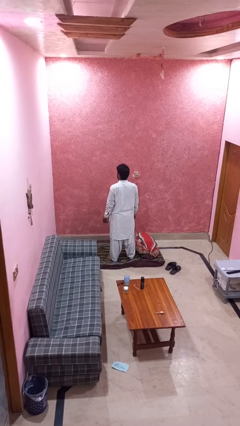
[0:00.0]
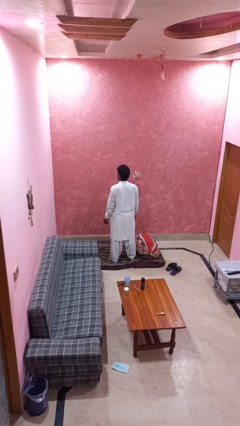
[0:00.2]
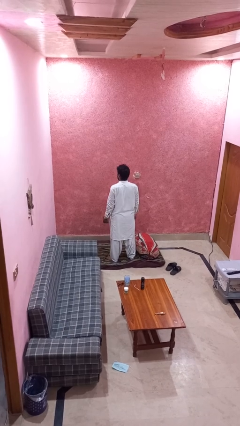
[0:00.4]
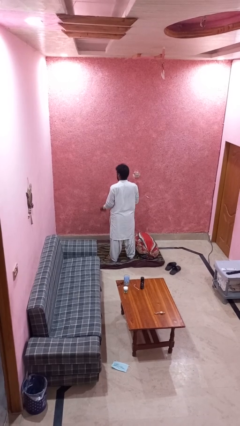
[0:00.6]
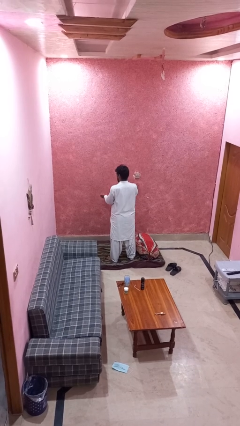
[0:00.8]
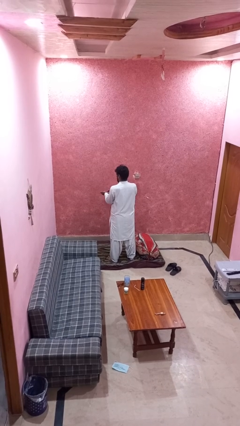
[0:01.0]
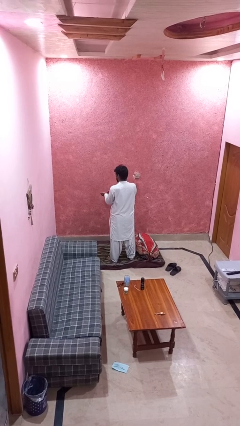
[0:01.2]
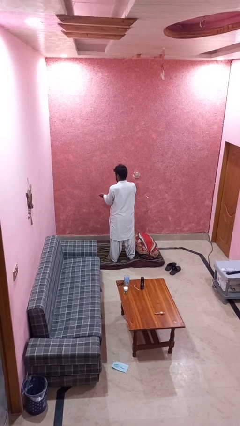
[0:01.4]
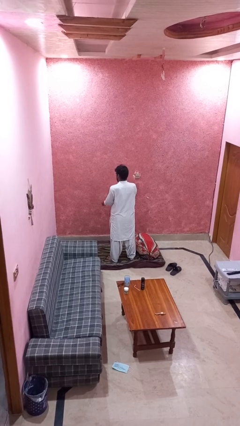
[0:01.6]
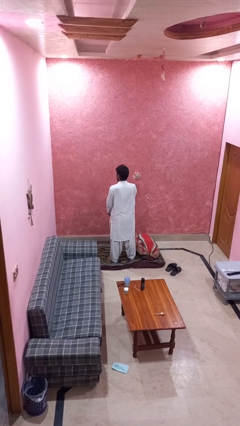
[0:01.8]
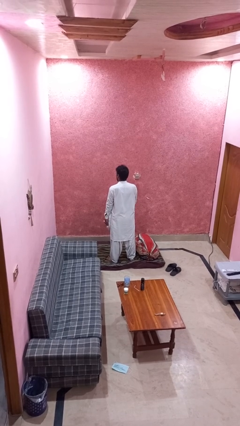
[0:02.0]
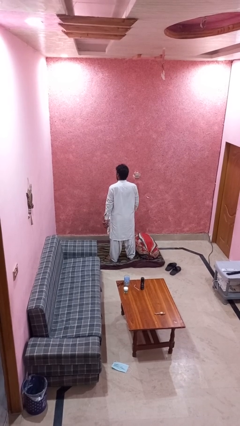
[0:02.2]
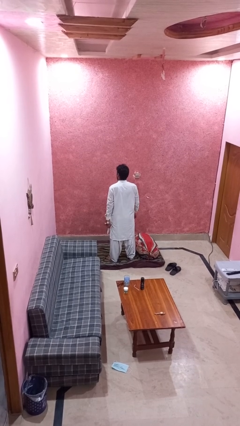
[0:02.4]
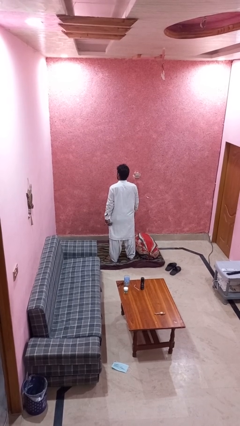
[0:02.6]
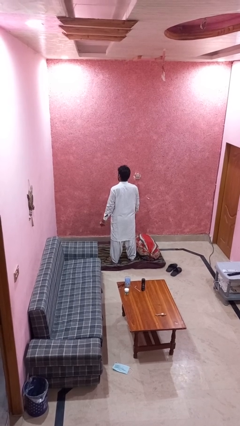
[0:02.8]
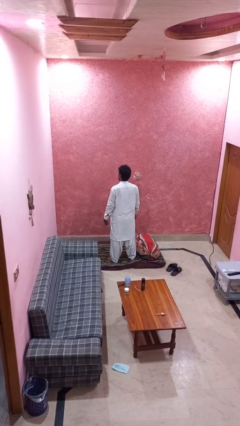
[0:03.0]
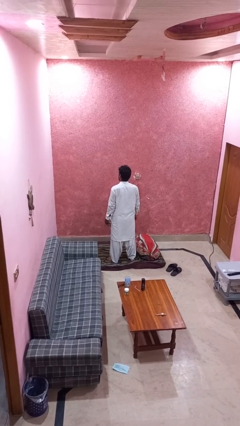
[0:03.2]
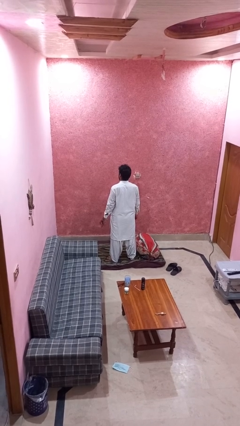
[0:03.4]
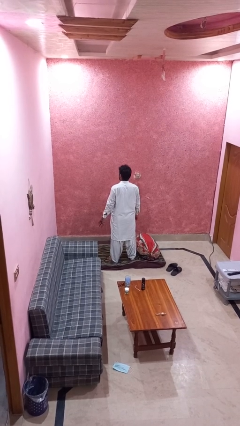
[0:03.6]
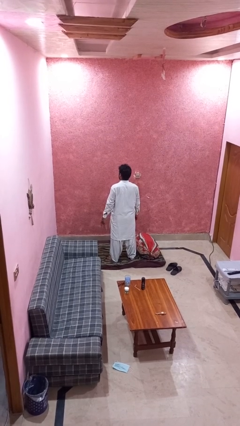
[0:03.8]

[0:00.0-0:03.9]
person takes off wristwatch

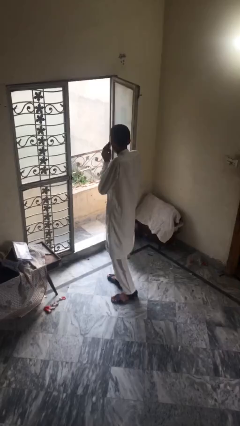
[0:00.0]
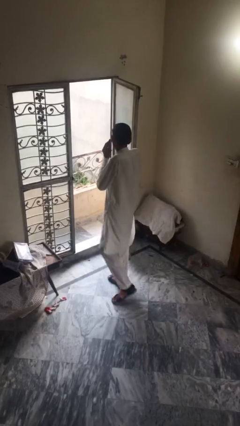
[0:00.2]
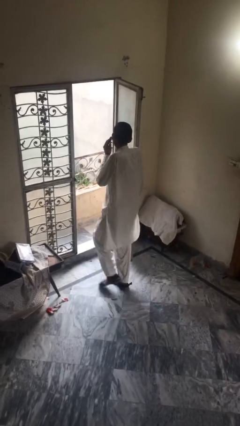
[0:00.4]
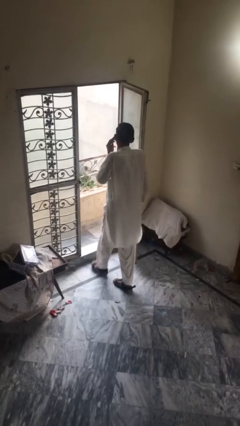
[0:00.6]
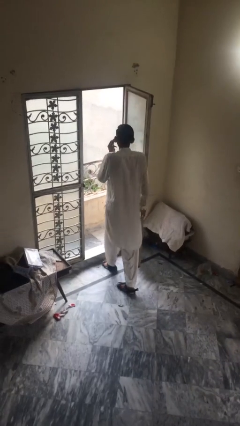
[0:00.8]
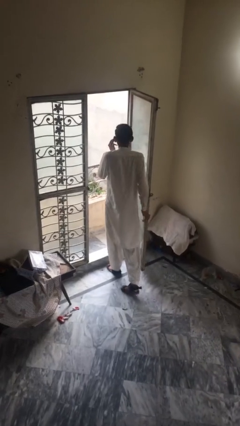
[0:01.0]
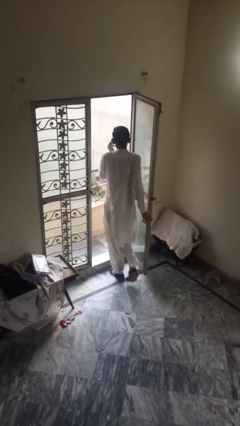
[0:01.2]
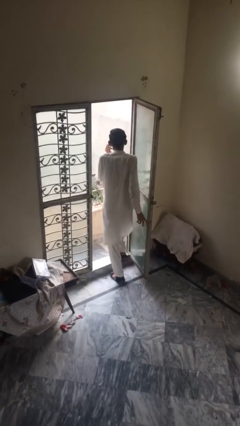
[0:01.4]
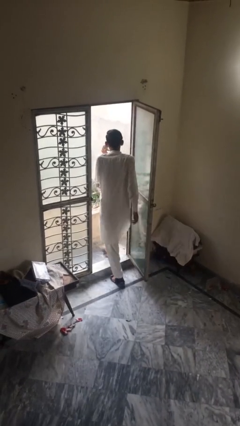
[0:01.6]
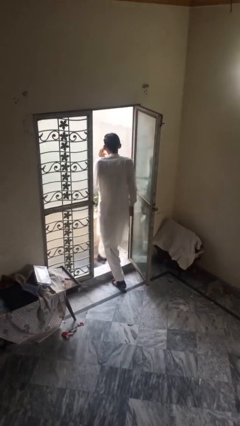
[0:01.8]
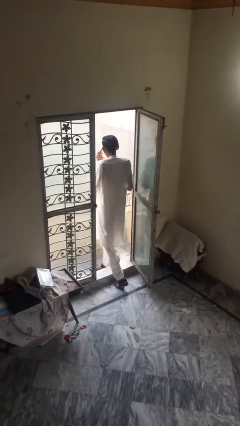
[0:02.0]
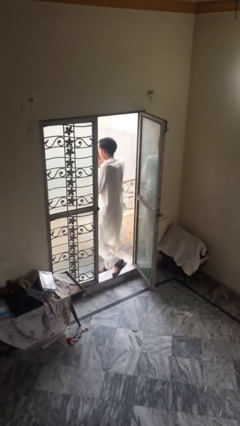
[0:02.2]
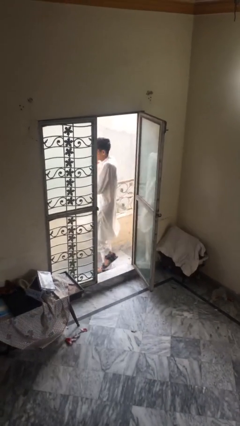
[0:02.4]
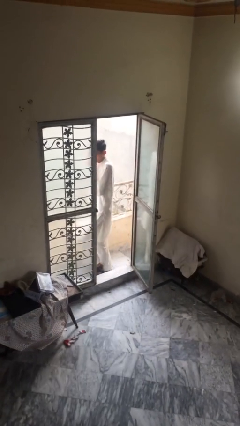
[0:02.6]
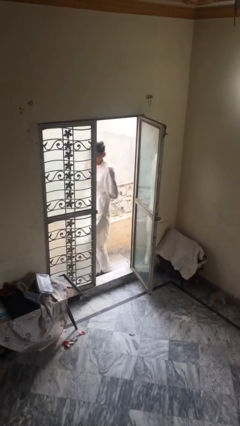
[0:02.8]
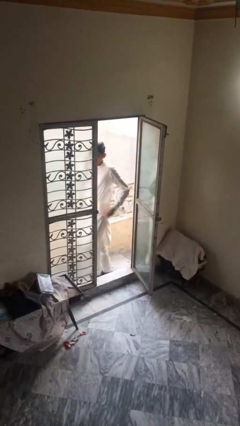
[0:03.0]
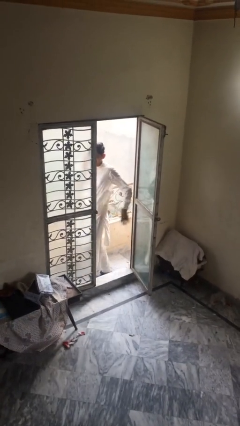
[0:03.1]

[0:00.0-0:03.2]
person exits scene through structure

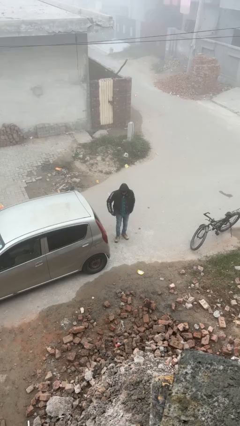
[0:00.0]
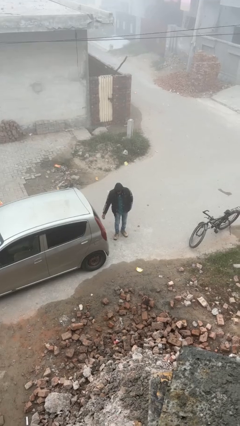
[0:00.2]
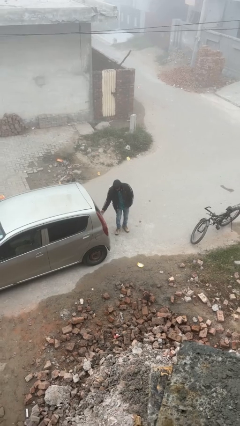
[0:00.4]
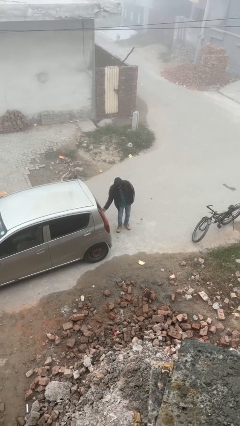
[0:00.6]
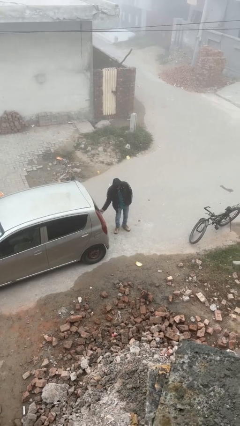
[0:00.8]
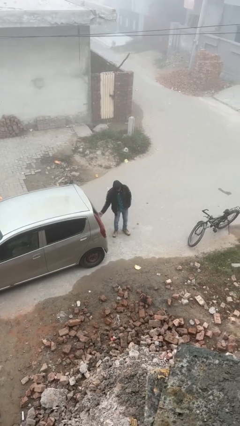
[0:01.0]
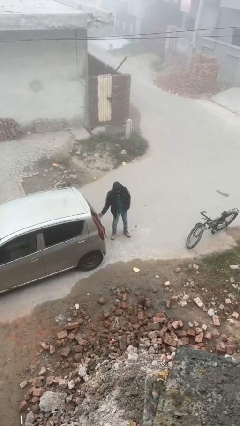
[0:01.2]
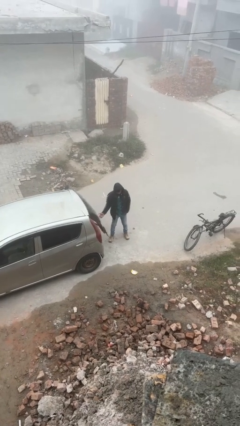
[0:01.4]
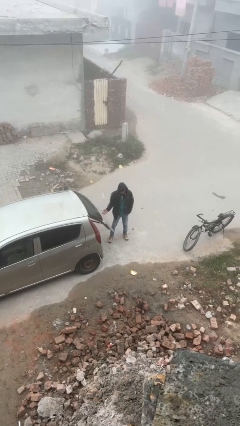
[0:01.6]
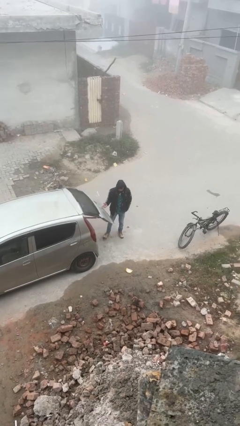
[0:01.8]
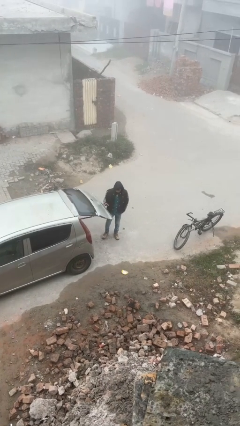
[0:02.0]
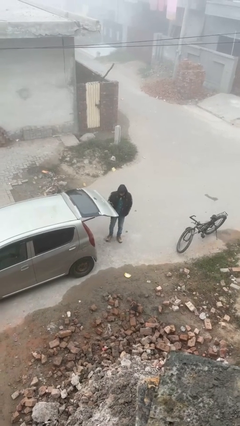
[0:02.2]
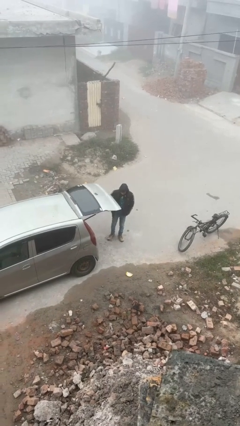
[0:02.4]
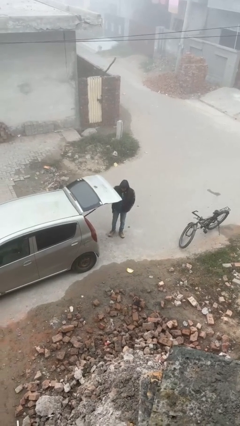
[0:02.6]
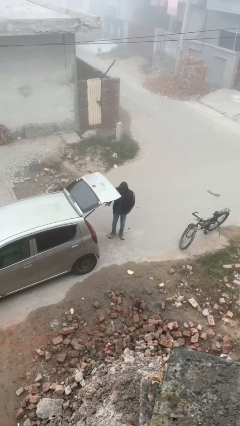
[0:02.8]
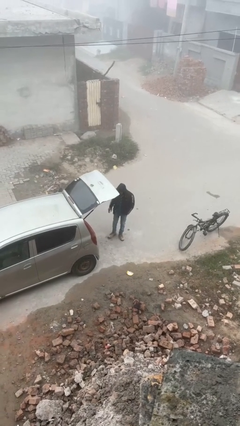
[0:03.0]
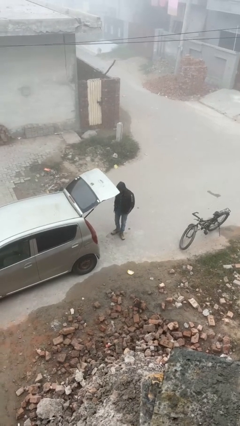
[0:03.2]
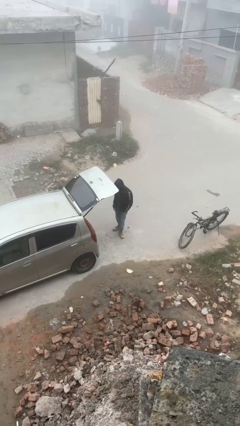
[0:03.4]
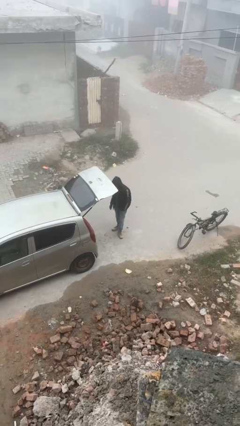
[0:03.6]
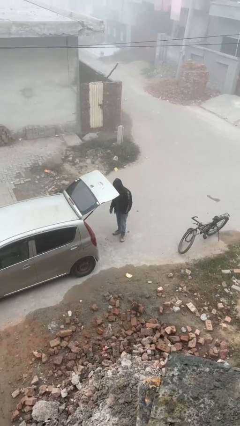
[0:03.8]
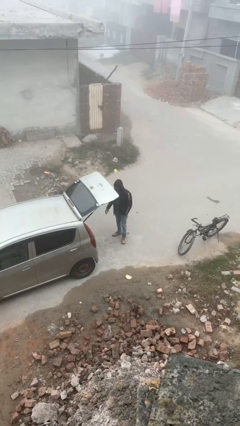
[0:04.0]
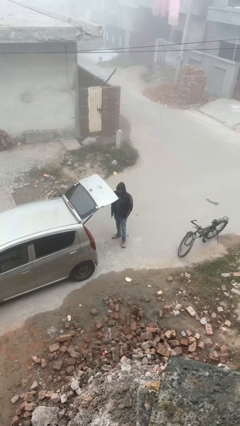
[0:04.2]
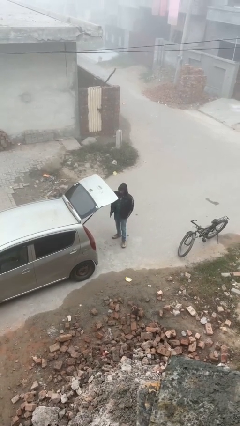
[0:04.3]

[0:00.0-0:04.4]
person opens car trunk

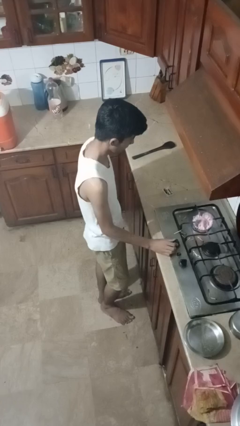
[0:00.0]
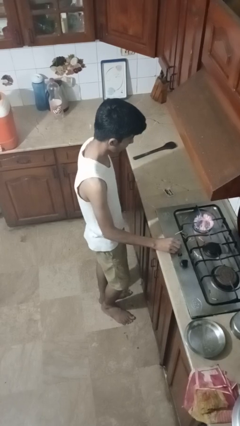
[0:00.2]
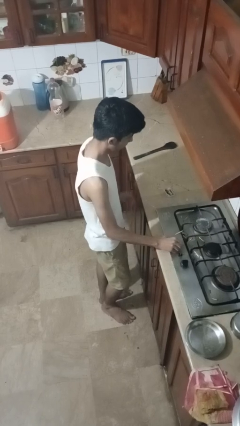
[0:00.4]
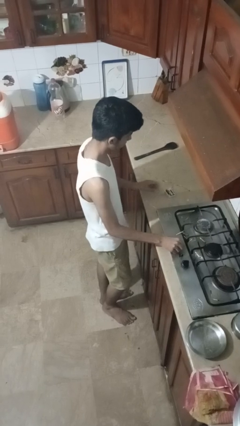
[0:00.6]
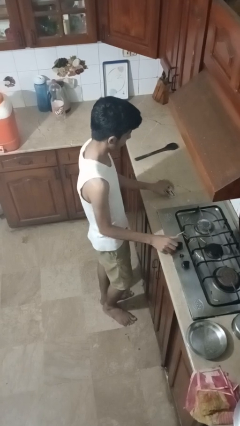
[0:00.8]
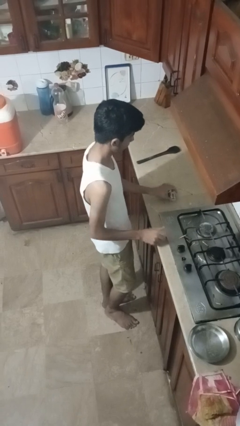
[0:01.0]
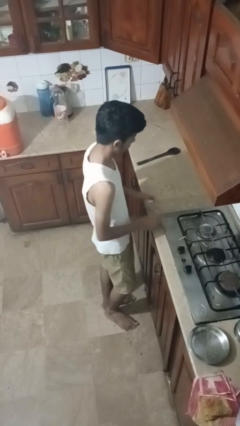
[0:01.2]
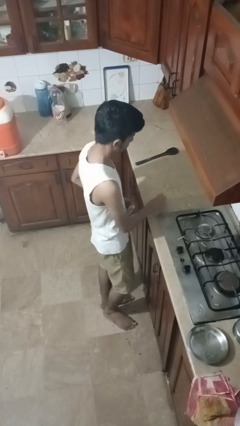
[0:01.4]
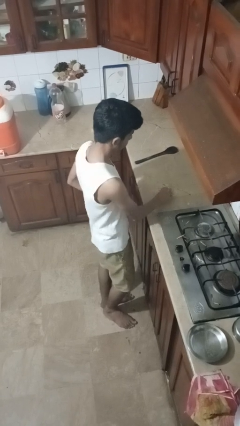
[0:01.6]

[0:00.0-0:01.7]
person turns off stovetop

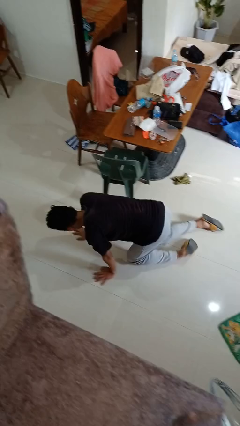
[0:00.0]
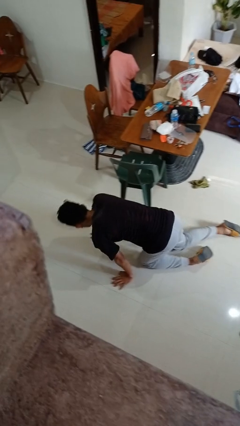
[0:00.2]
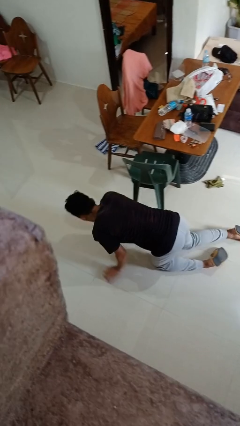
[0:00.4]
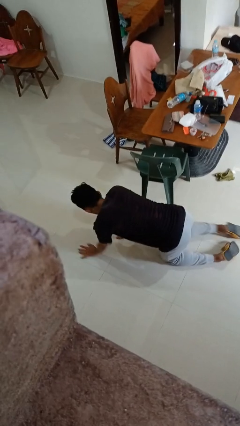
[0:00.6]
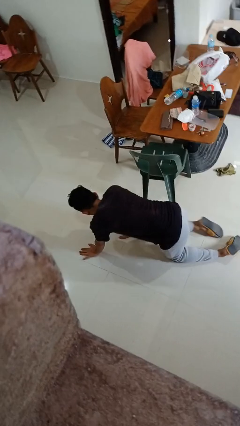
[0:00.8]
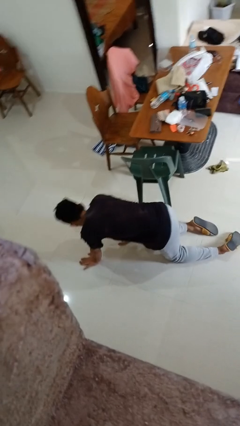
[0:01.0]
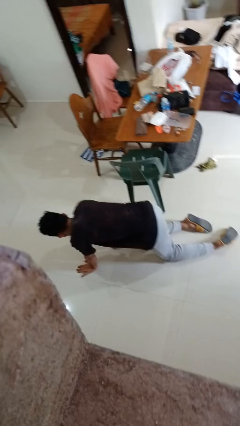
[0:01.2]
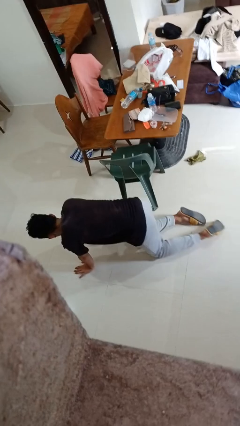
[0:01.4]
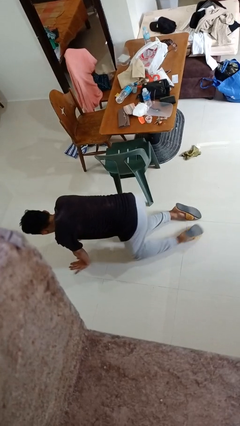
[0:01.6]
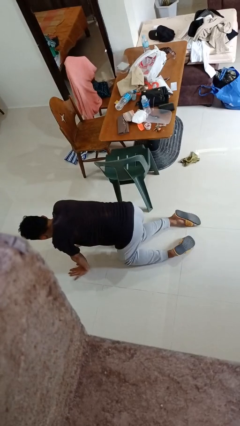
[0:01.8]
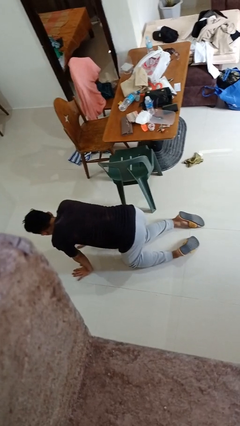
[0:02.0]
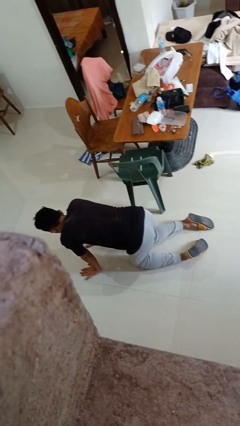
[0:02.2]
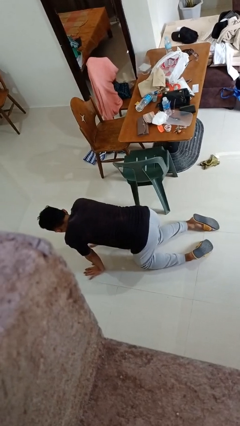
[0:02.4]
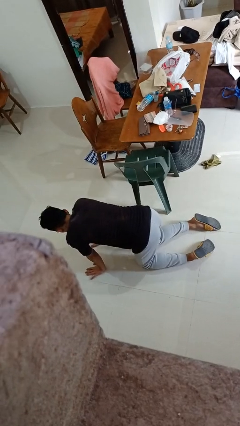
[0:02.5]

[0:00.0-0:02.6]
person crawls

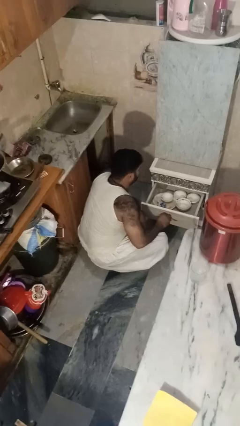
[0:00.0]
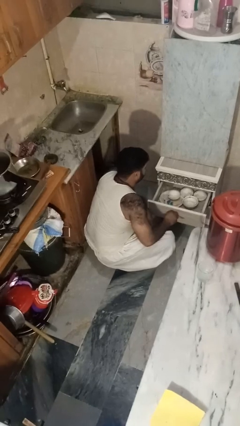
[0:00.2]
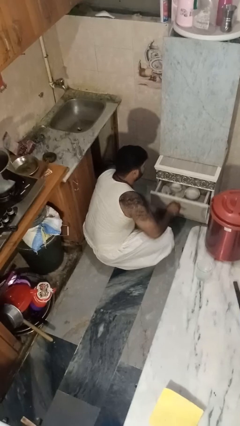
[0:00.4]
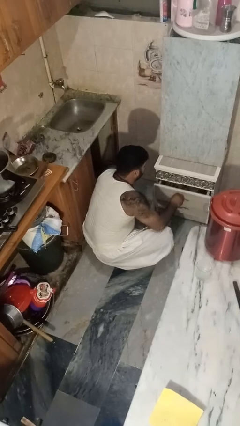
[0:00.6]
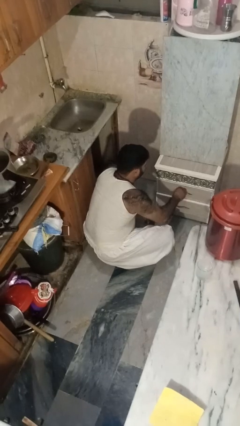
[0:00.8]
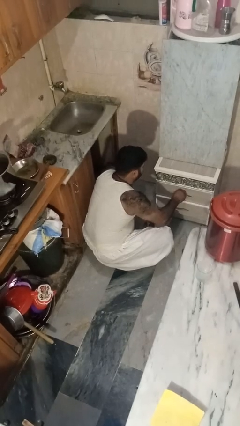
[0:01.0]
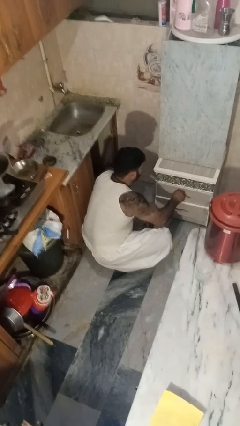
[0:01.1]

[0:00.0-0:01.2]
person closes kitchen drawer

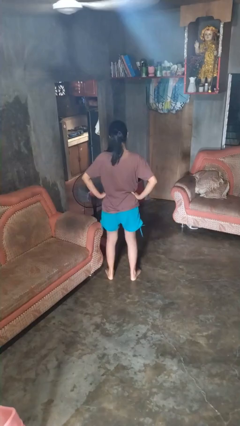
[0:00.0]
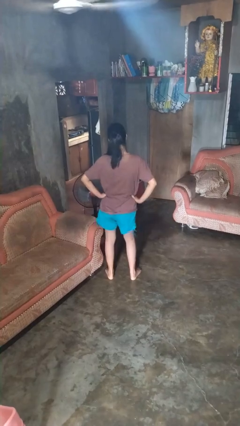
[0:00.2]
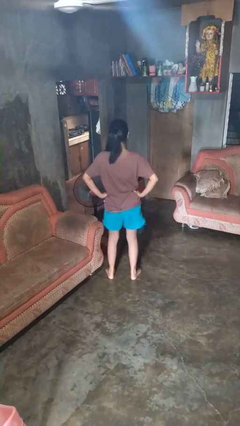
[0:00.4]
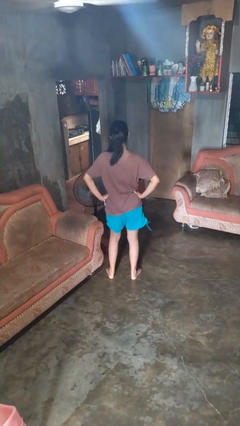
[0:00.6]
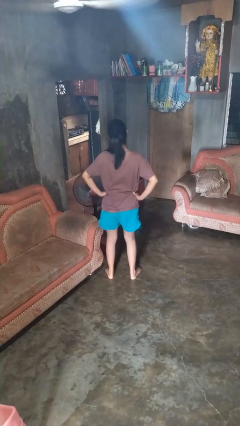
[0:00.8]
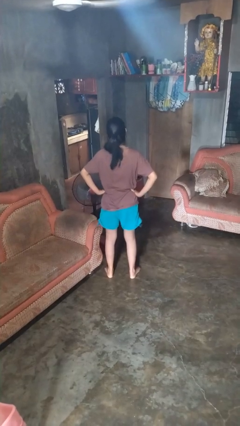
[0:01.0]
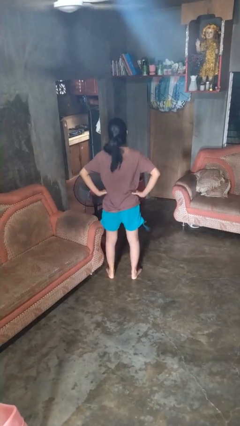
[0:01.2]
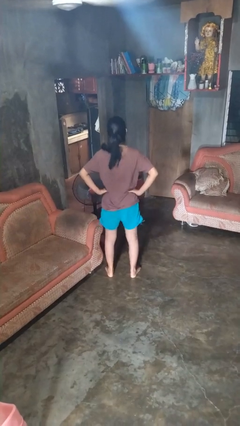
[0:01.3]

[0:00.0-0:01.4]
person wiggles hips
